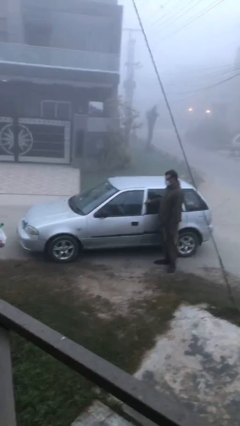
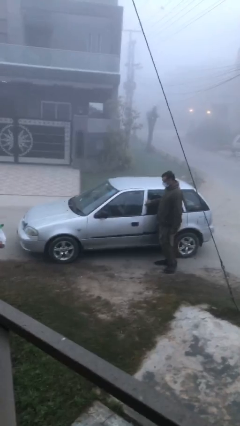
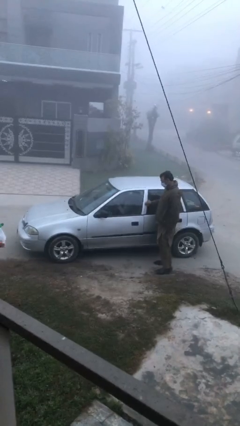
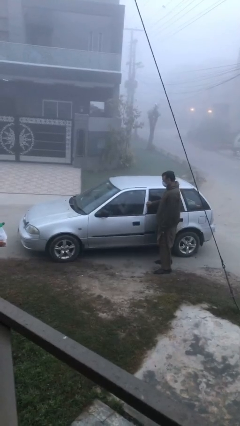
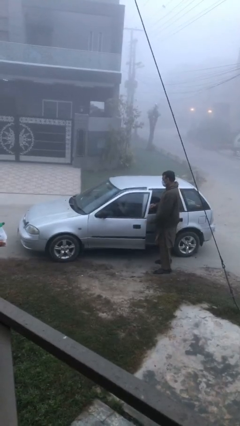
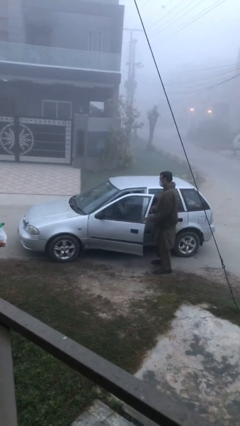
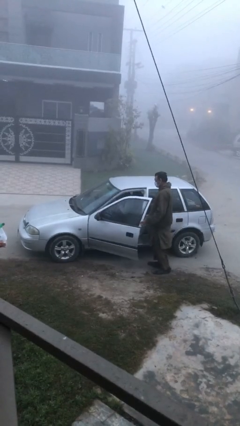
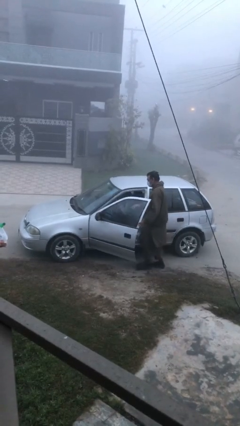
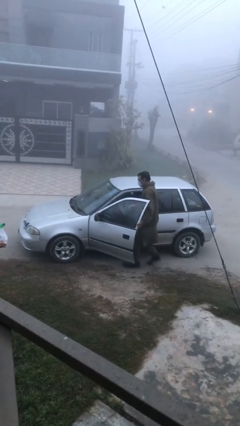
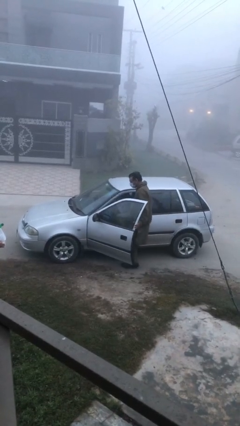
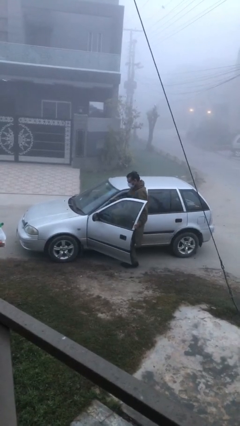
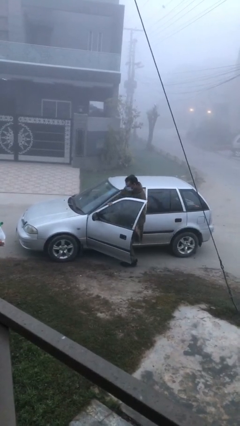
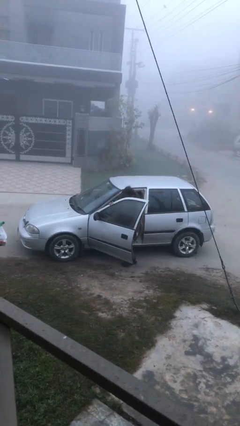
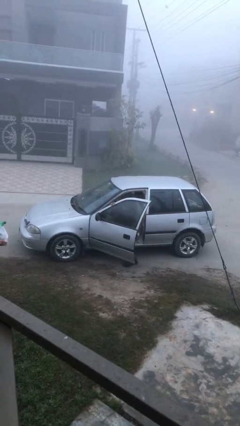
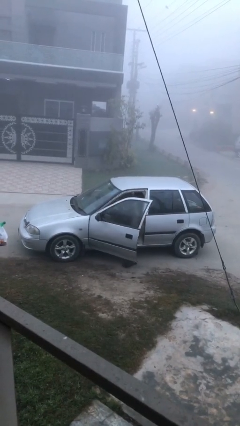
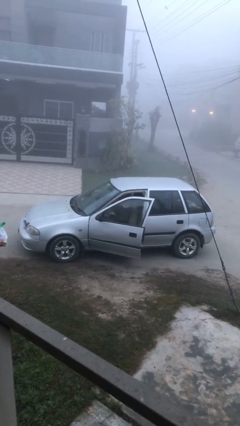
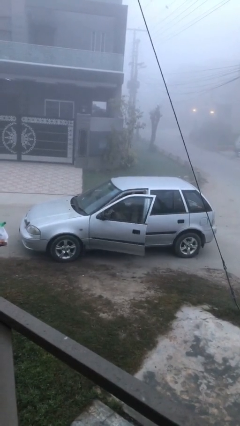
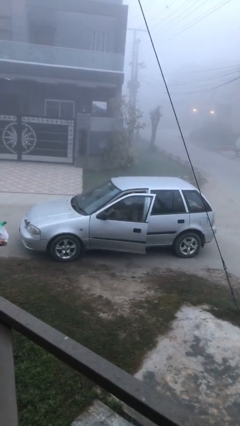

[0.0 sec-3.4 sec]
car picks up person

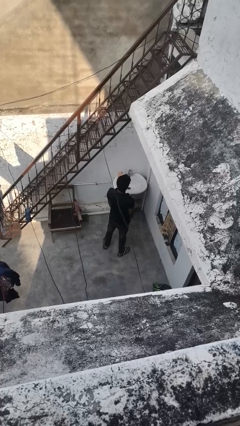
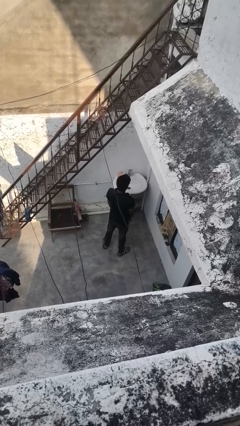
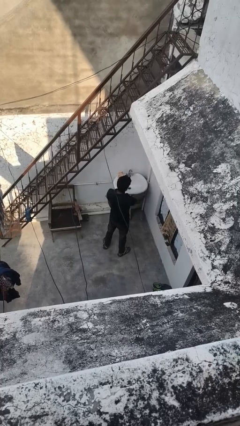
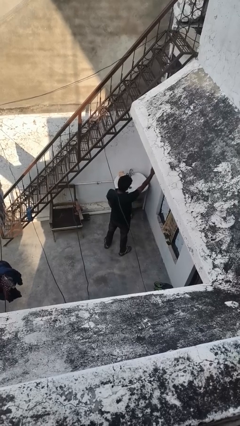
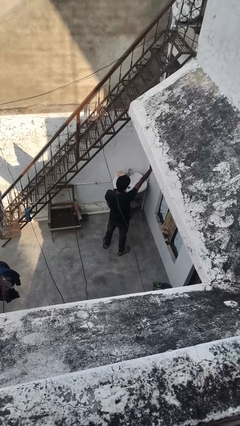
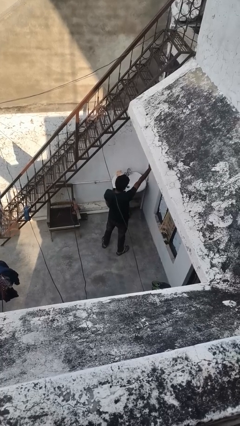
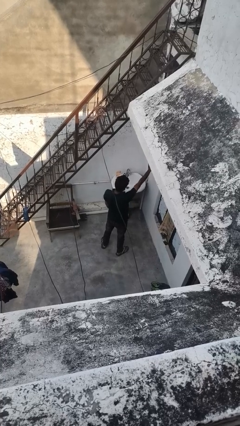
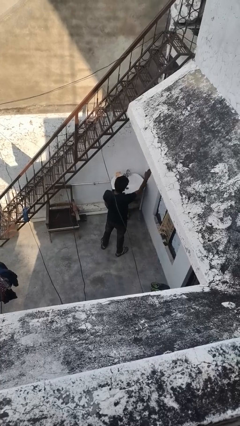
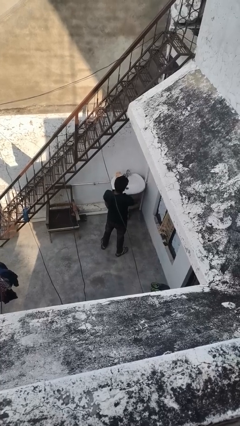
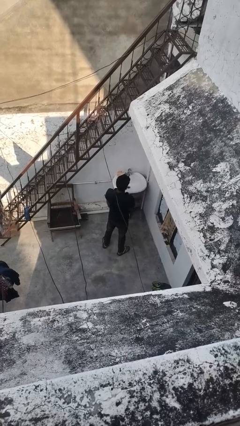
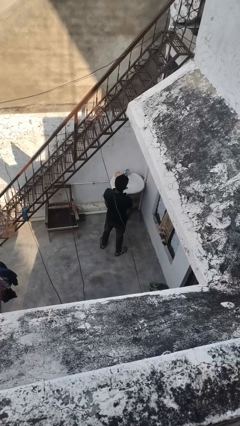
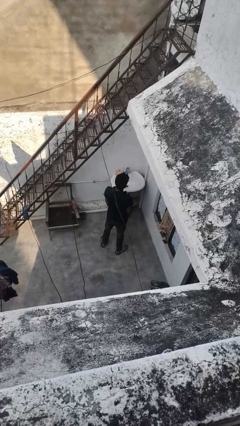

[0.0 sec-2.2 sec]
person gestures stop

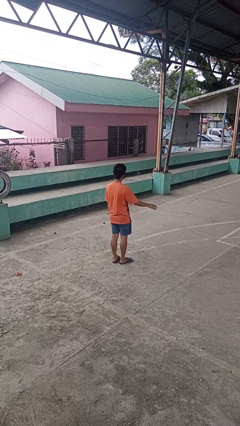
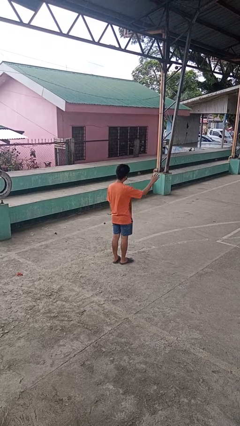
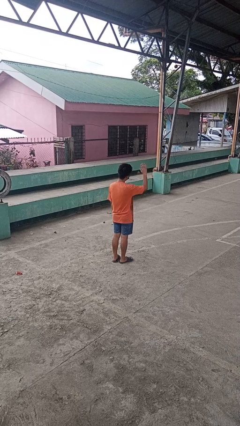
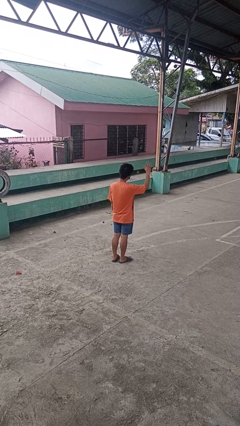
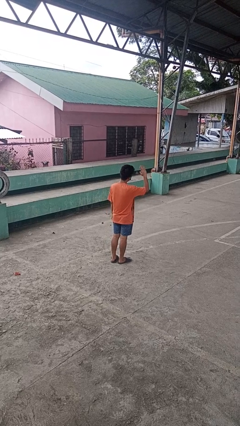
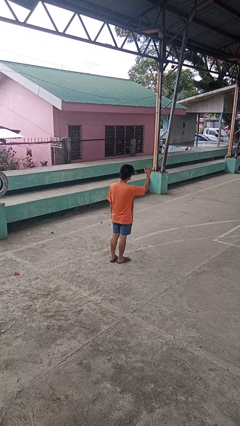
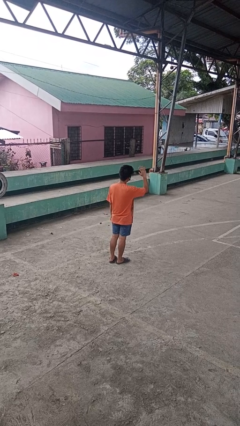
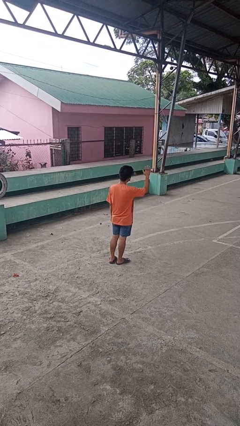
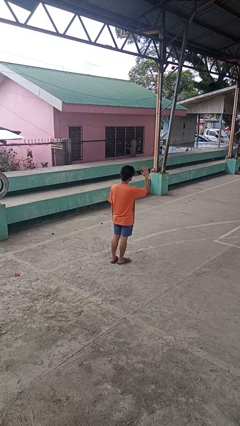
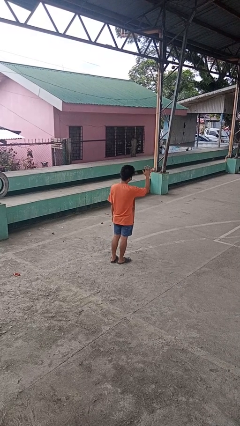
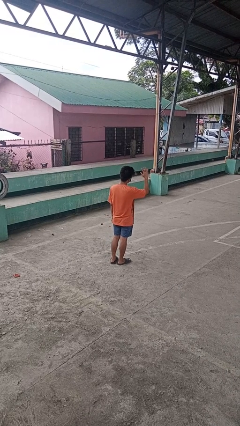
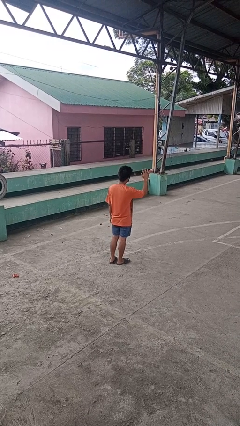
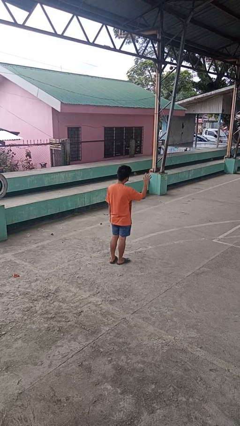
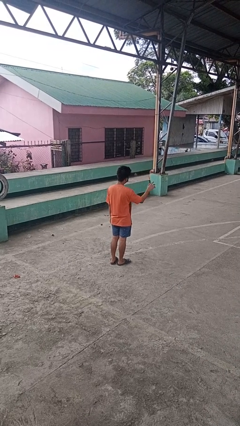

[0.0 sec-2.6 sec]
person waves at person

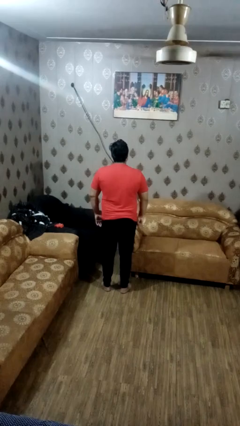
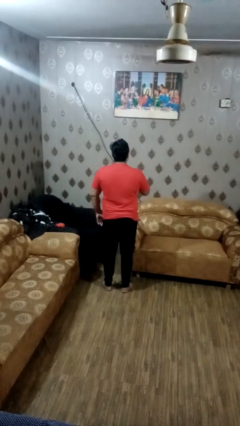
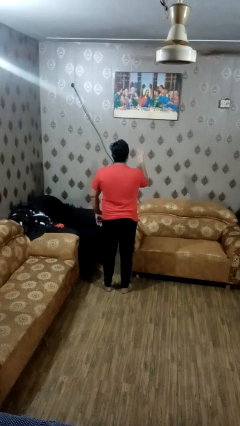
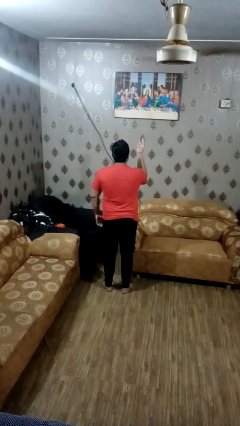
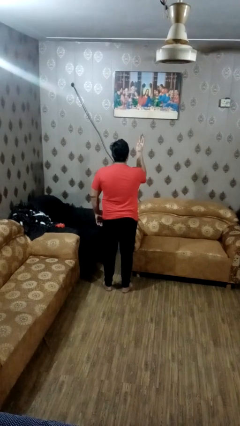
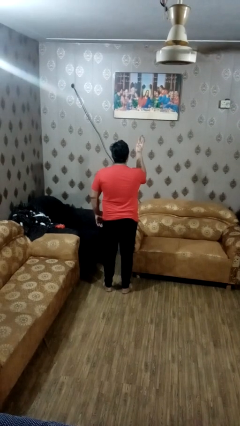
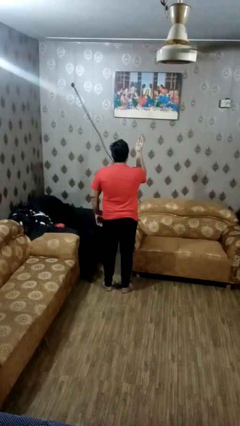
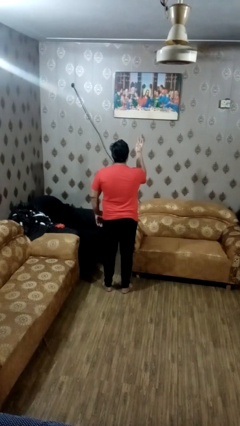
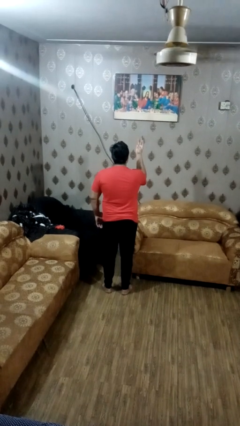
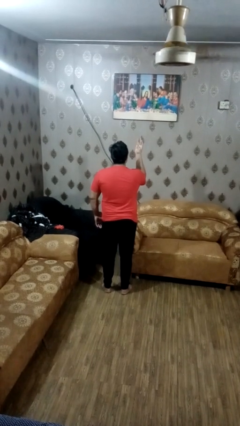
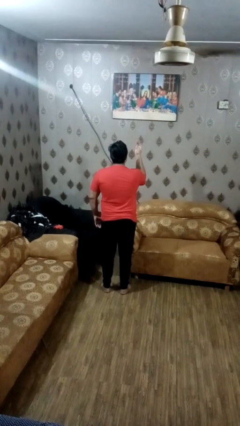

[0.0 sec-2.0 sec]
person gestures number three

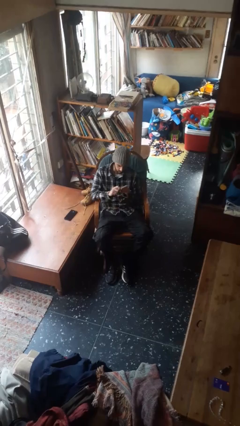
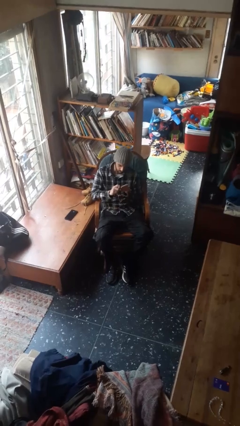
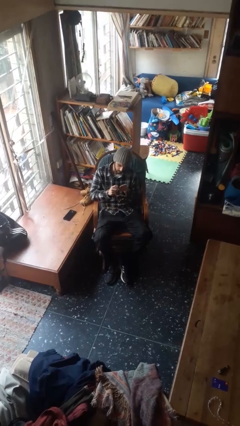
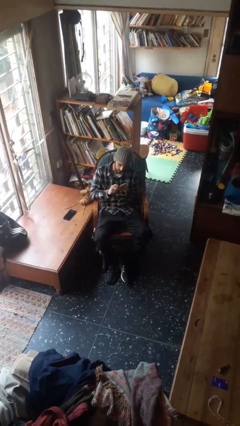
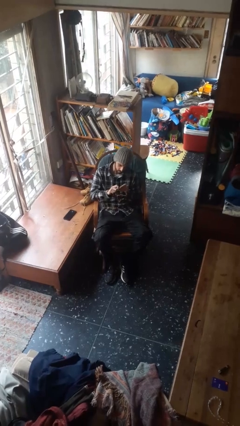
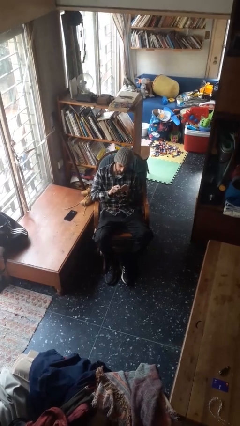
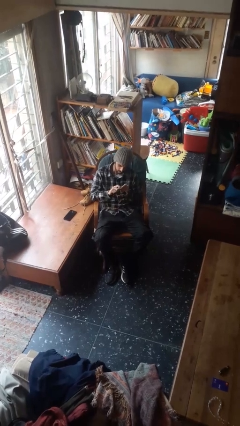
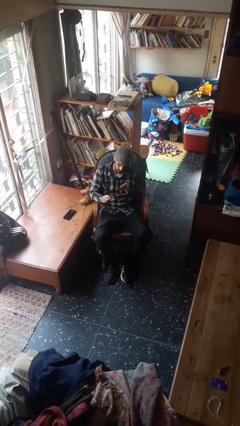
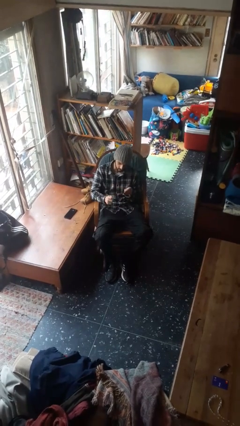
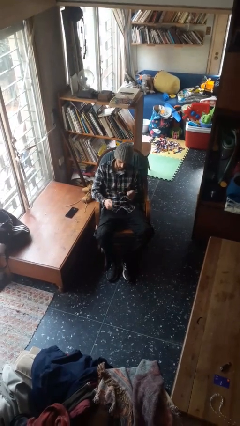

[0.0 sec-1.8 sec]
person files fingernails

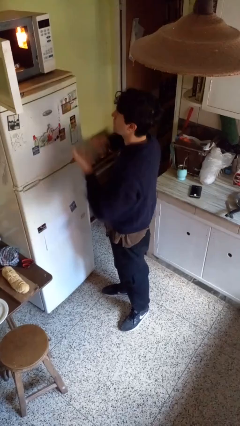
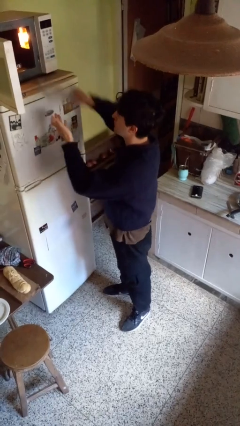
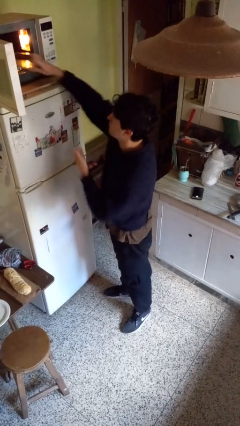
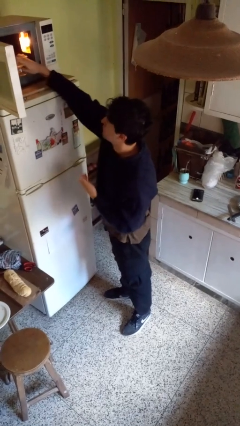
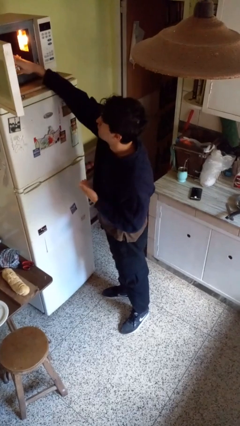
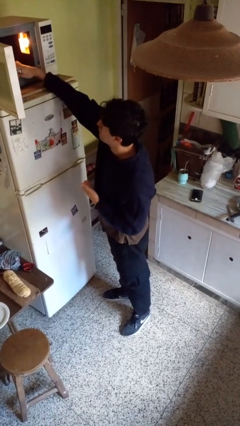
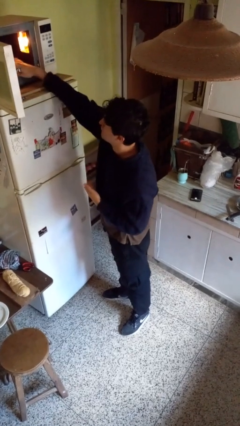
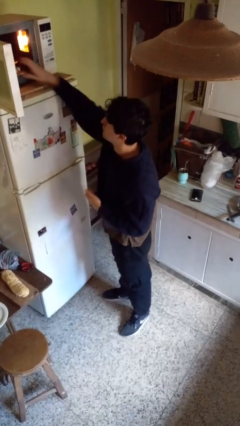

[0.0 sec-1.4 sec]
person puts object into microwave

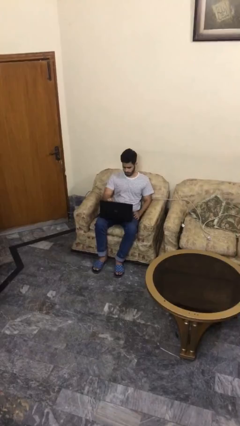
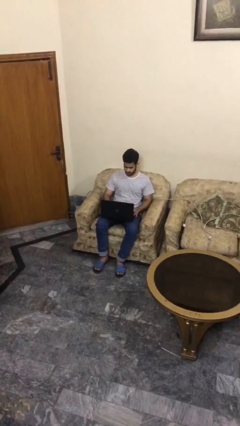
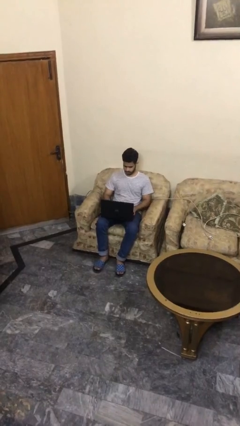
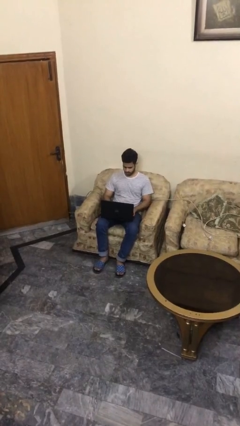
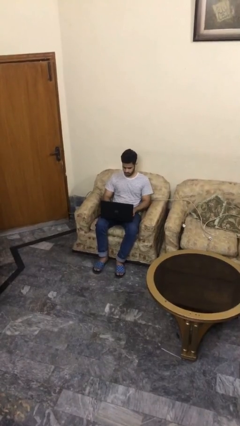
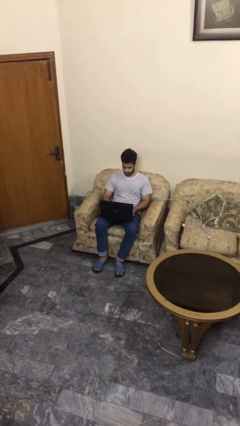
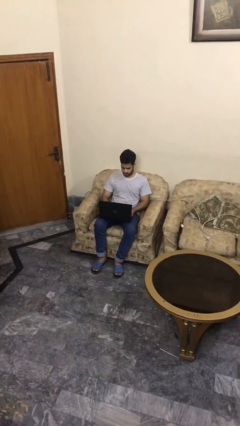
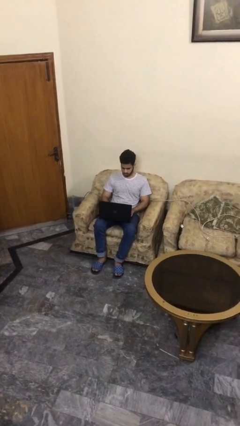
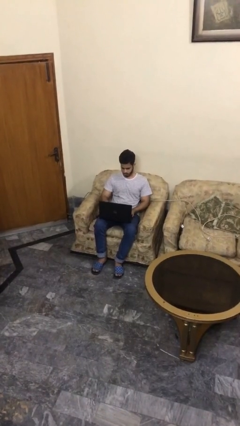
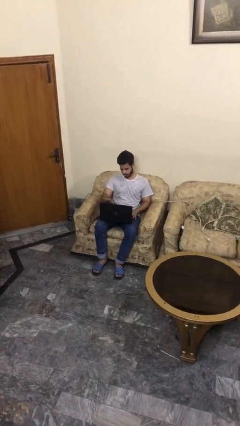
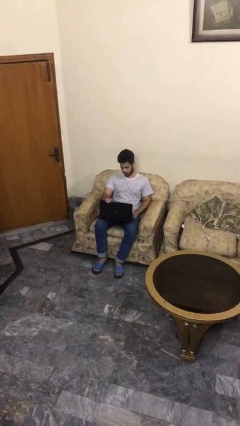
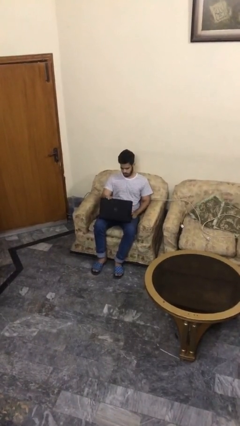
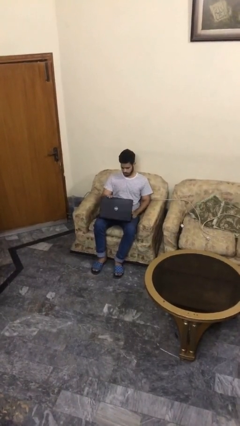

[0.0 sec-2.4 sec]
person interacts with laptop

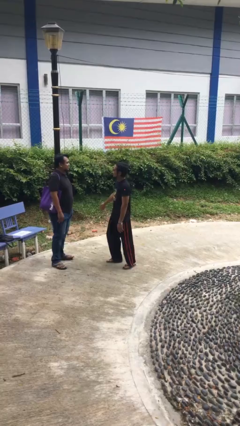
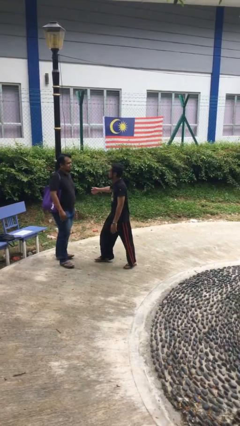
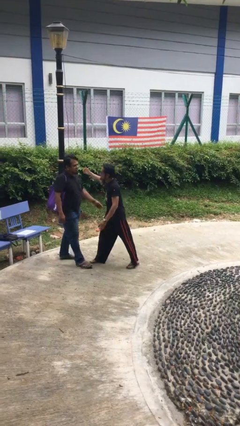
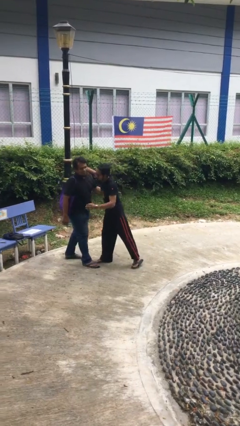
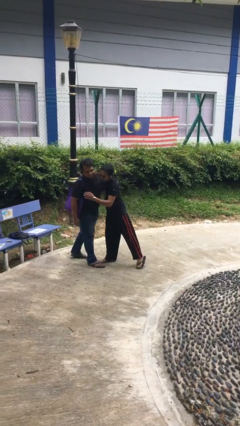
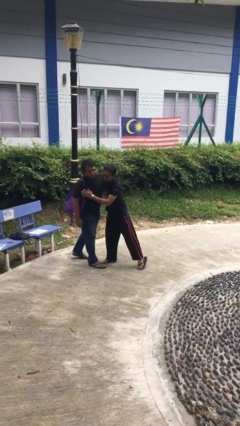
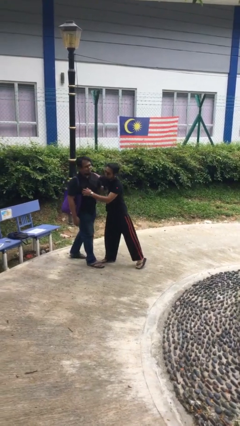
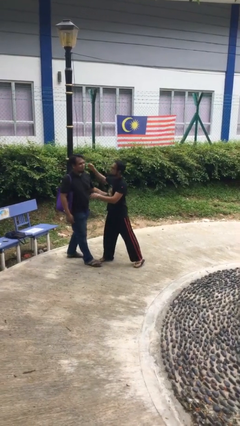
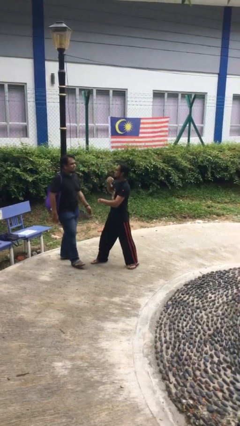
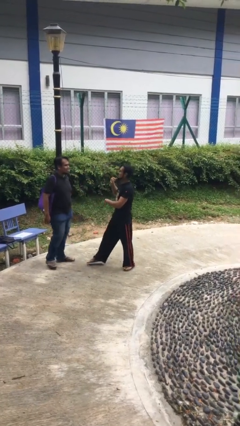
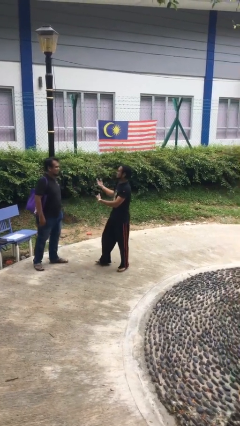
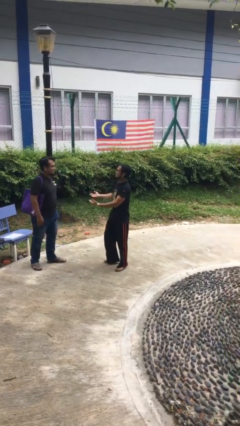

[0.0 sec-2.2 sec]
person embraces person
